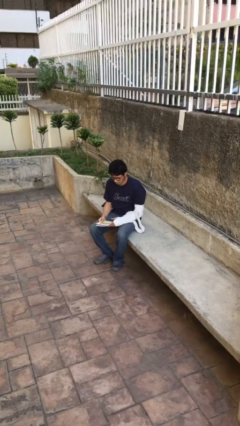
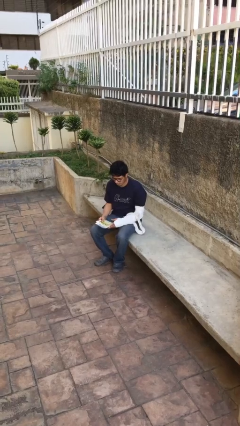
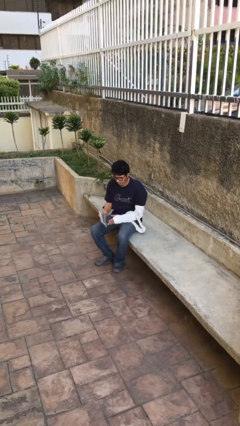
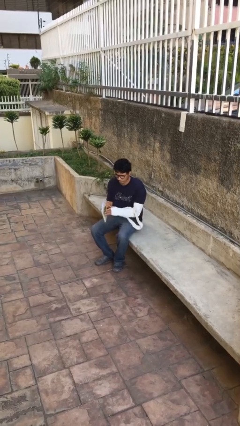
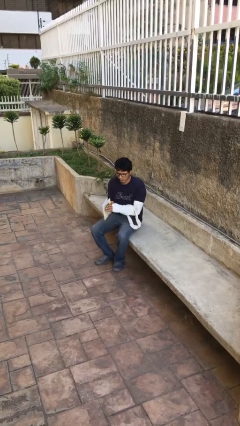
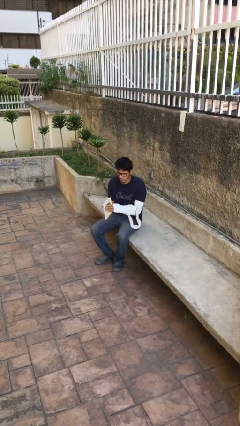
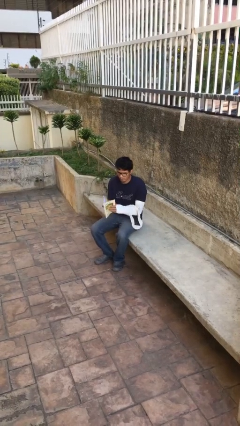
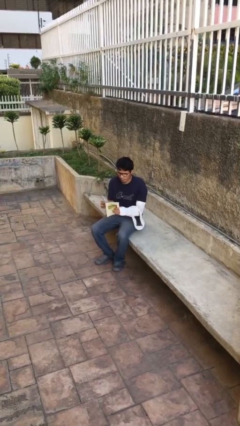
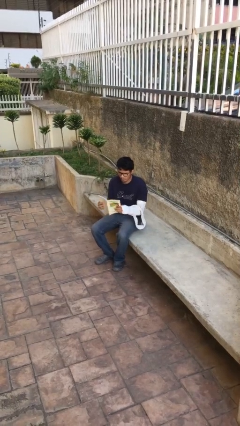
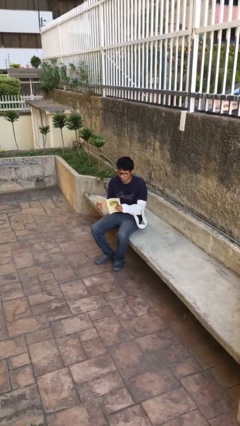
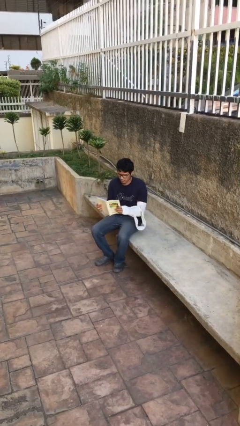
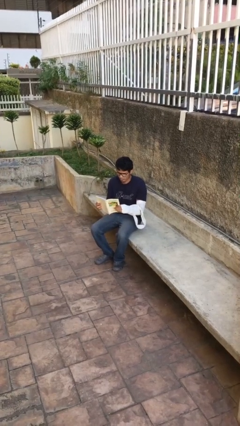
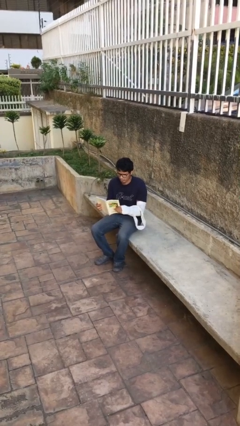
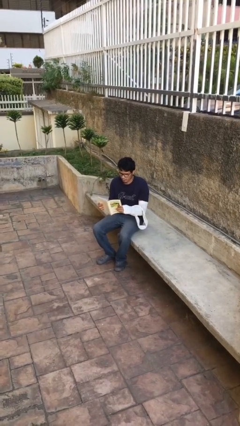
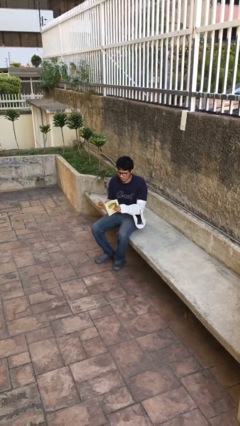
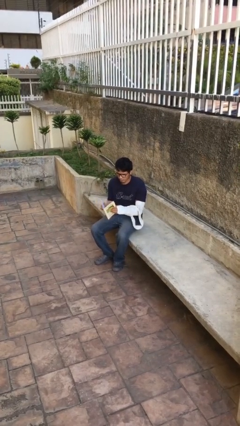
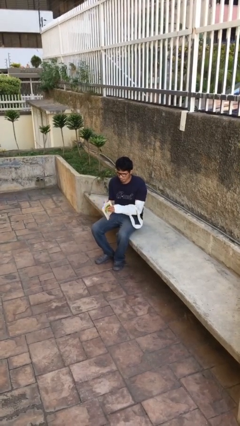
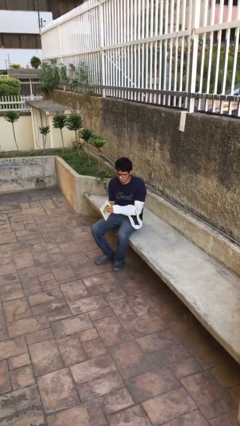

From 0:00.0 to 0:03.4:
person reads document

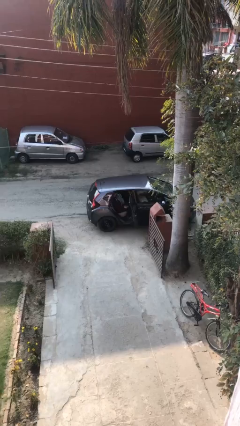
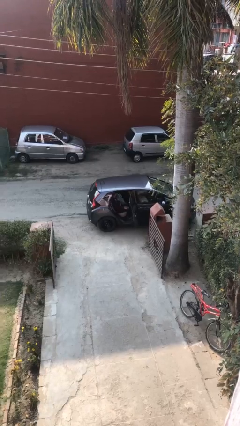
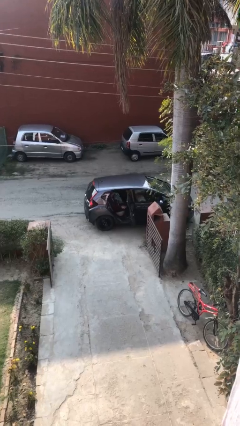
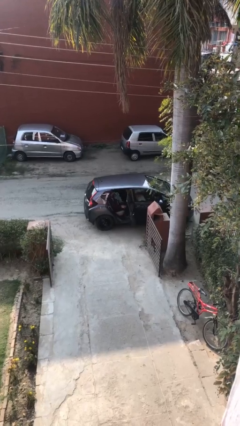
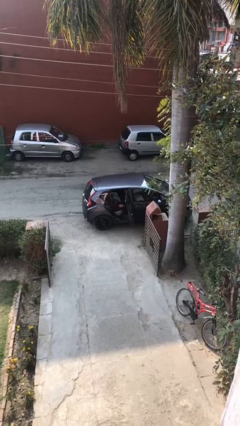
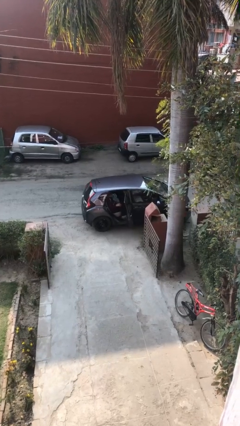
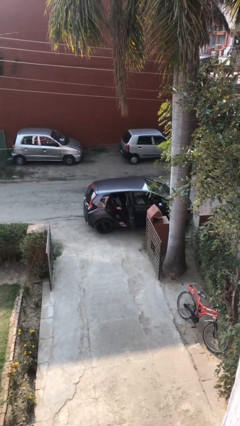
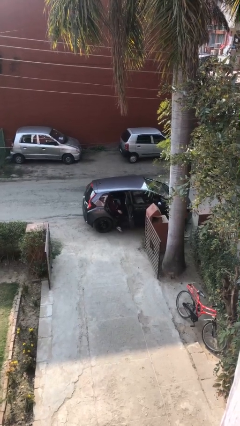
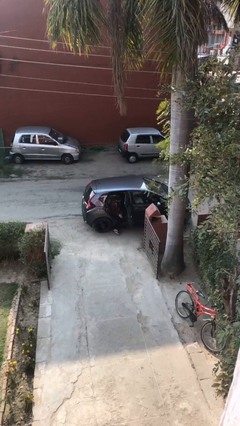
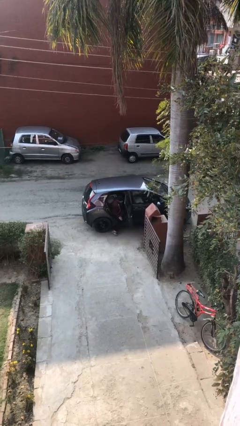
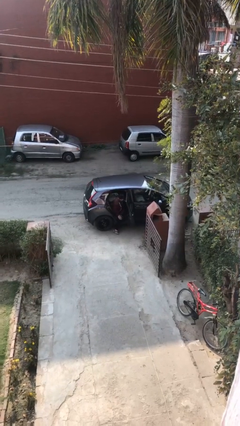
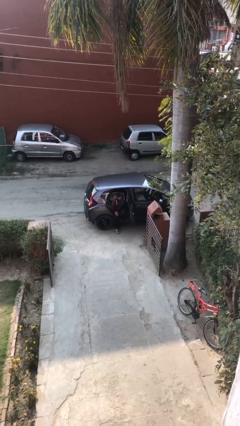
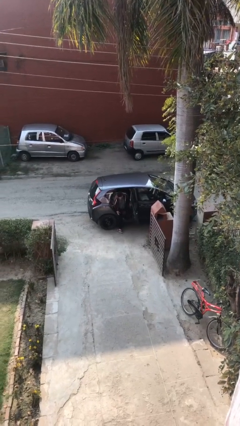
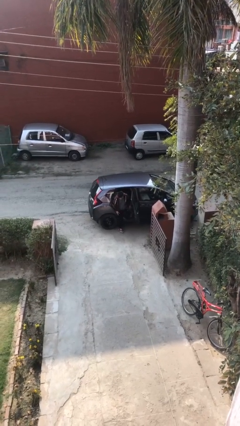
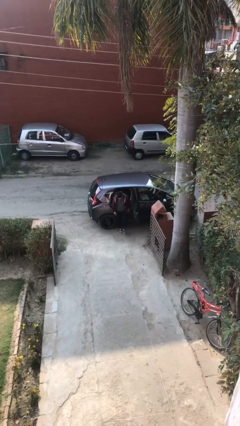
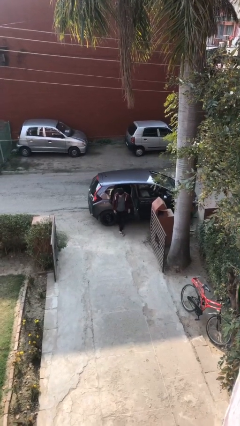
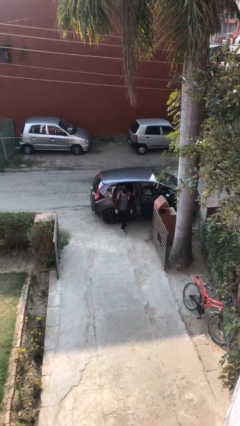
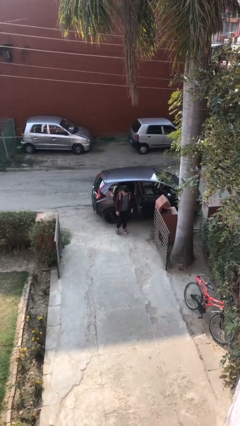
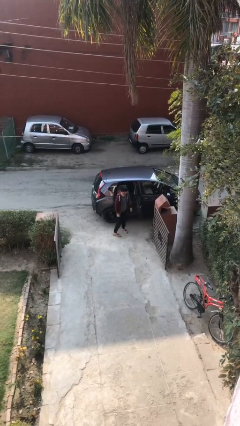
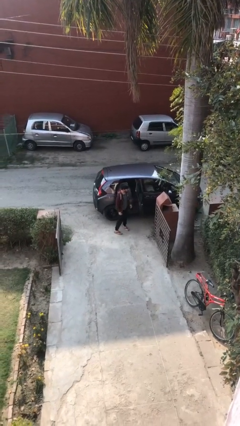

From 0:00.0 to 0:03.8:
person exits car

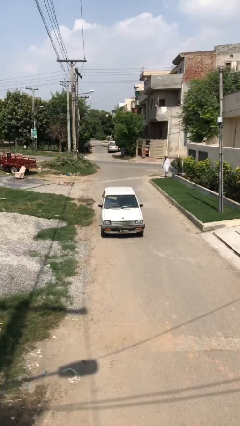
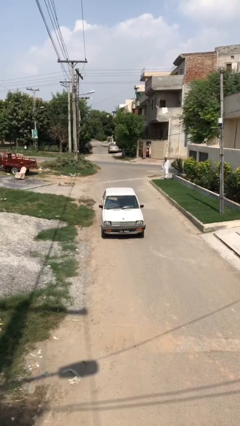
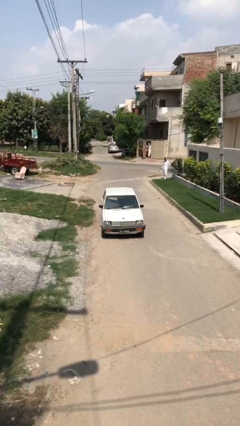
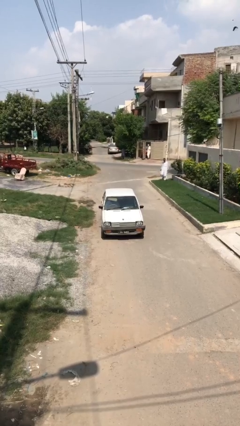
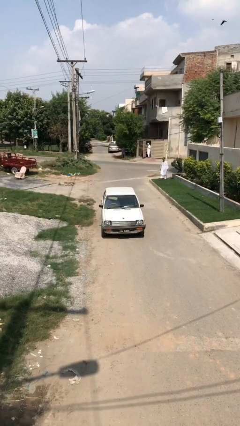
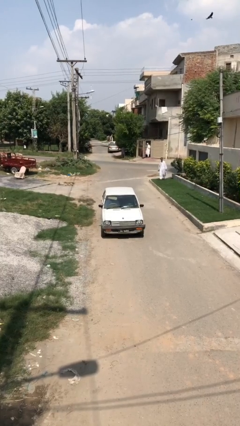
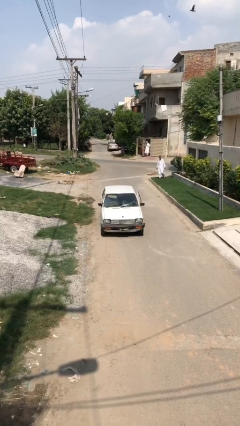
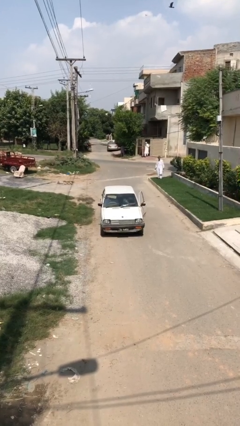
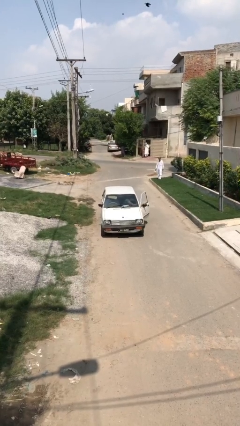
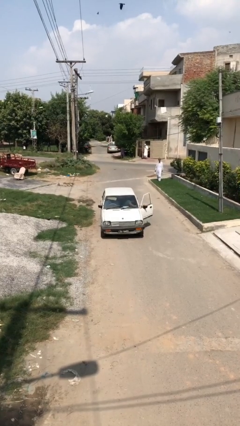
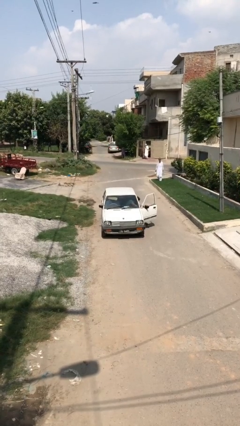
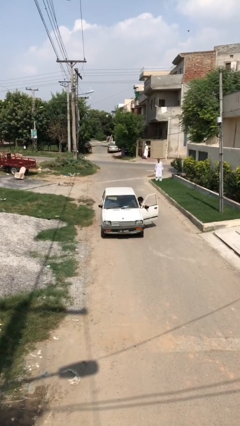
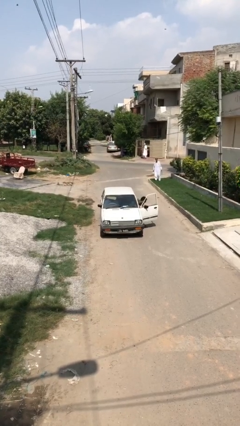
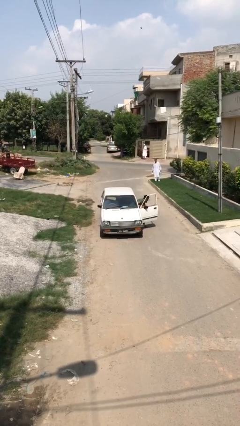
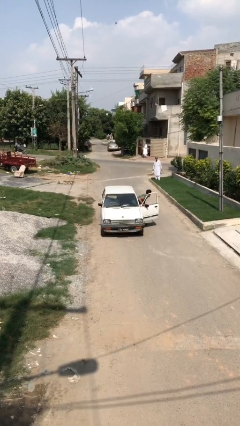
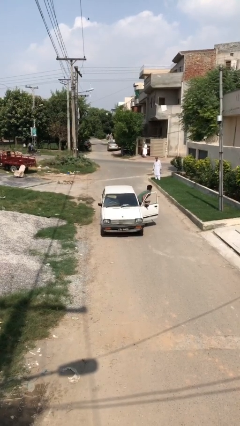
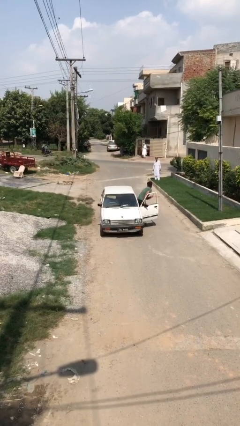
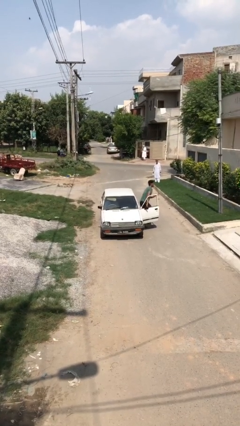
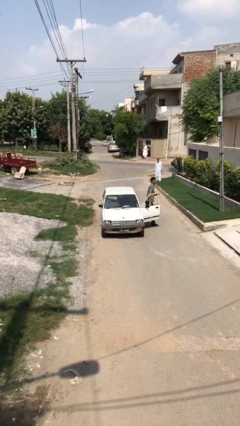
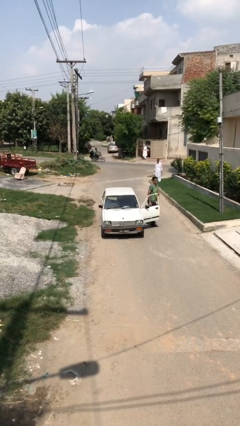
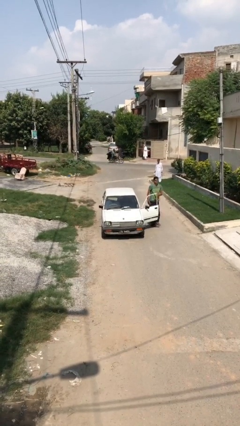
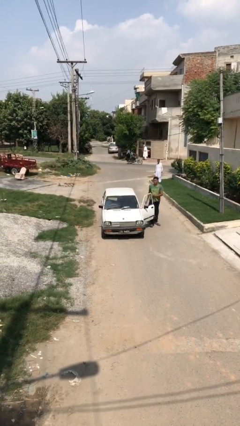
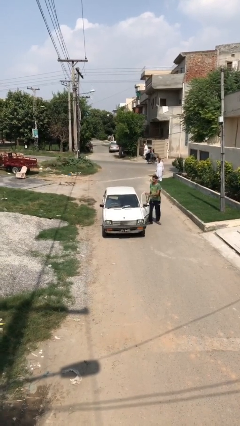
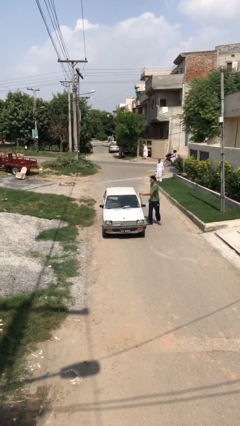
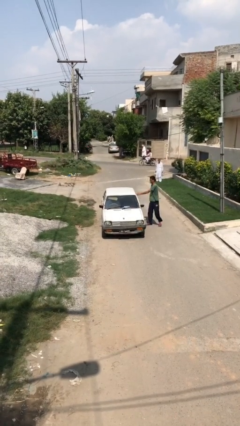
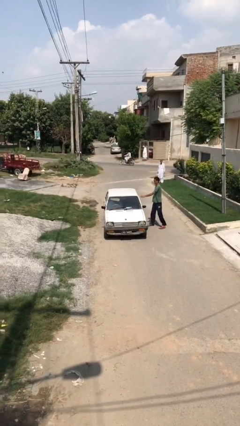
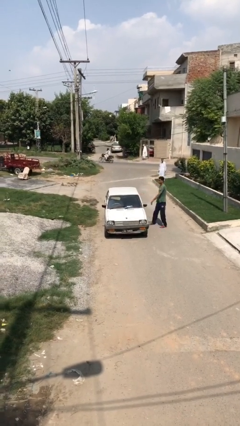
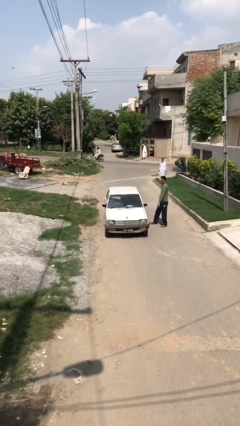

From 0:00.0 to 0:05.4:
car drops off person

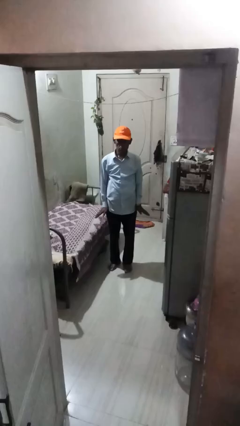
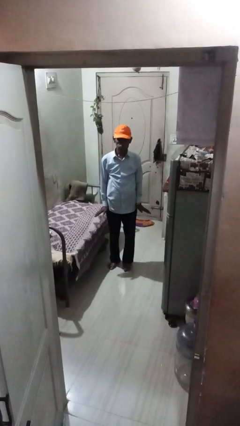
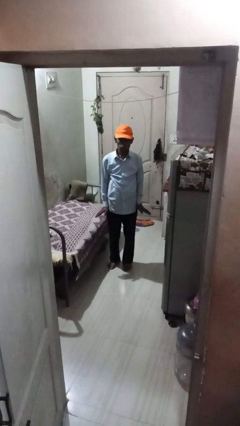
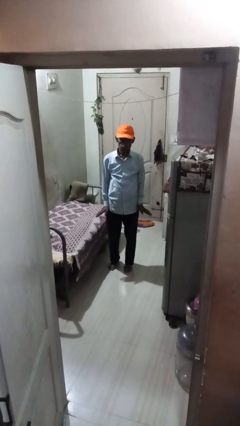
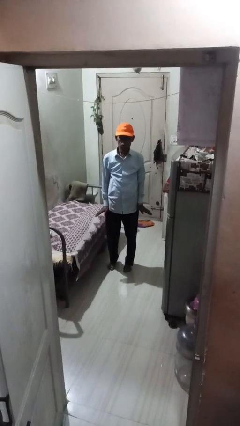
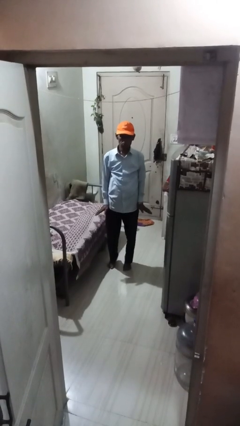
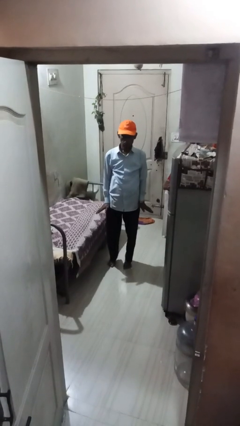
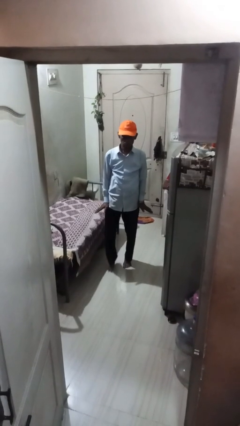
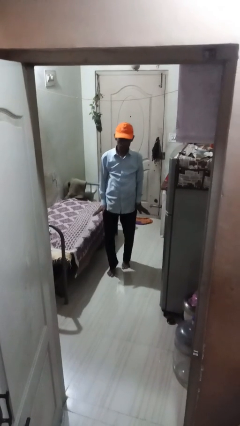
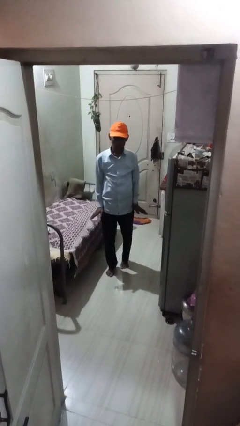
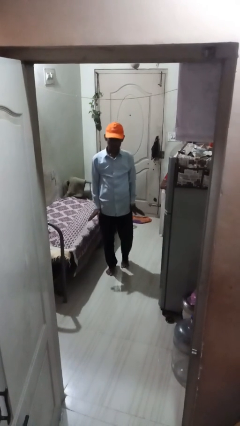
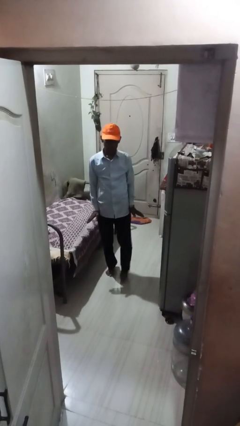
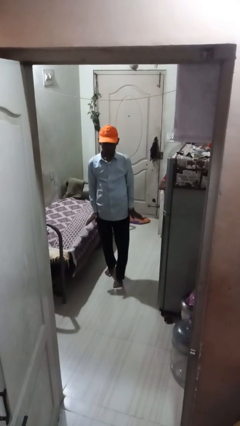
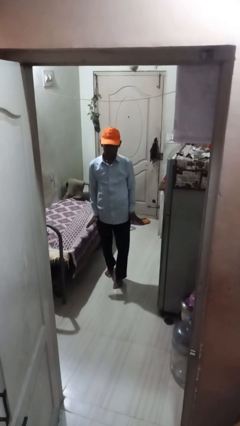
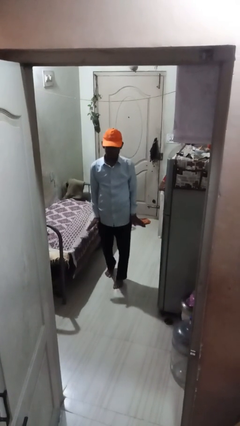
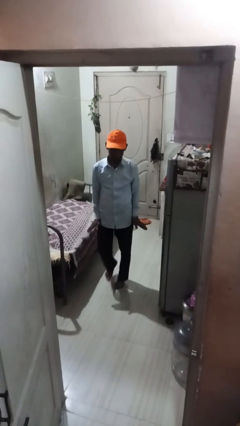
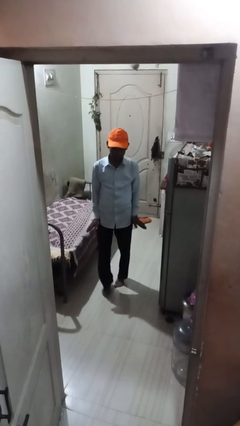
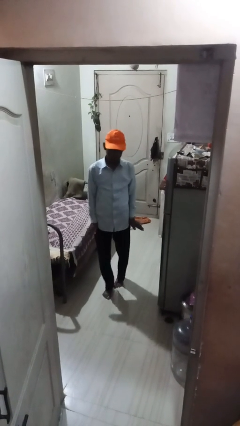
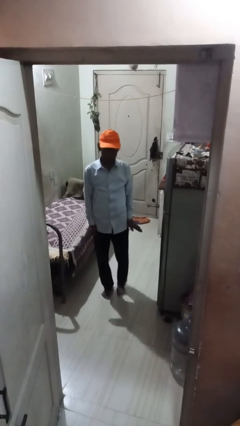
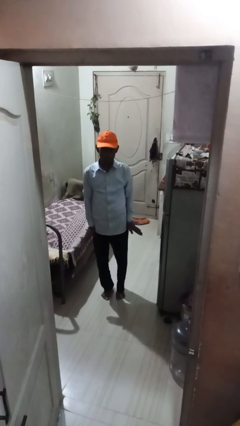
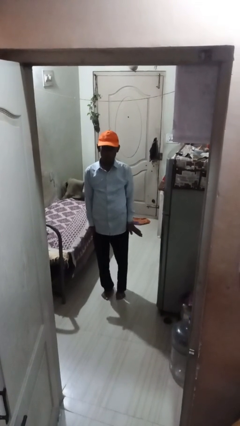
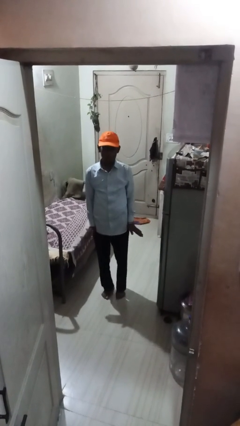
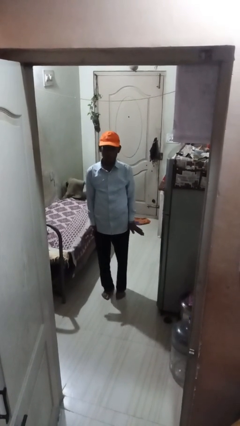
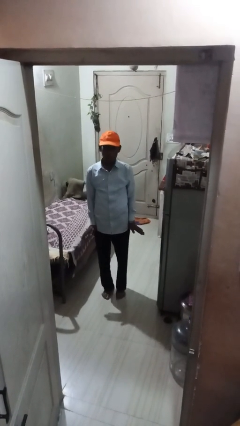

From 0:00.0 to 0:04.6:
person walks tiptoe

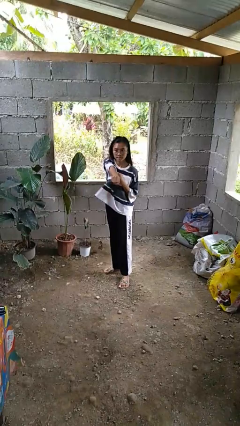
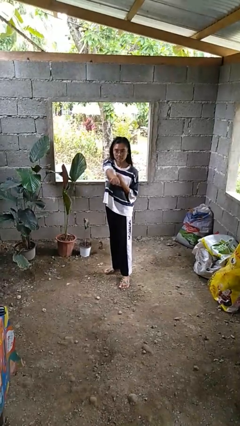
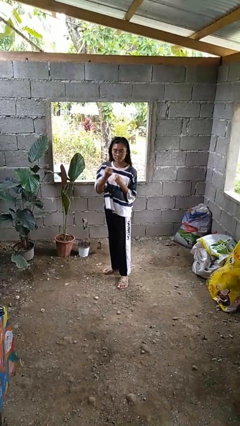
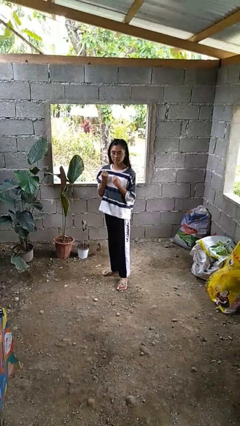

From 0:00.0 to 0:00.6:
person karate chop
